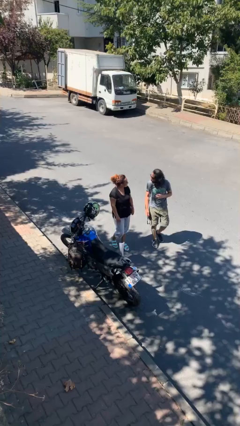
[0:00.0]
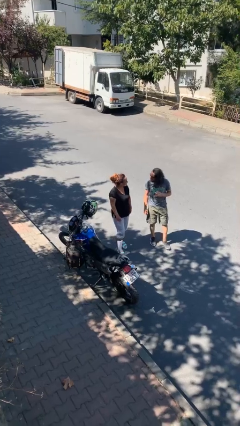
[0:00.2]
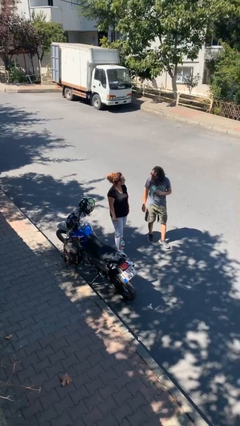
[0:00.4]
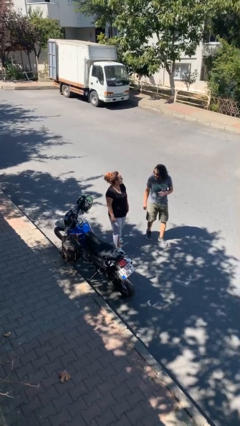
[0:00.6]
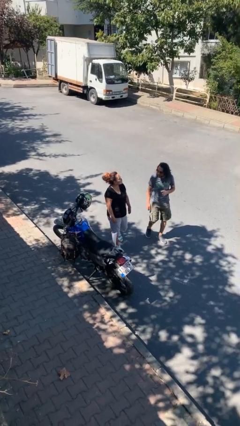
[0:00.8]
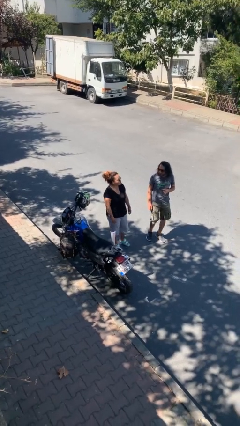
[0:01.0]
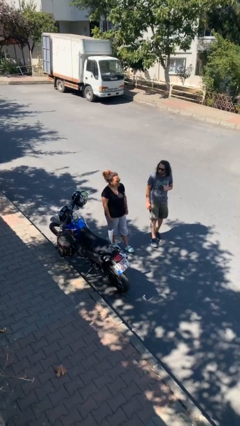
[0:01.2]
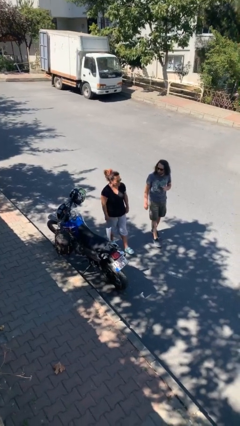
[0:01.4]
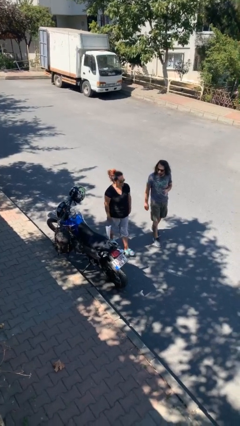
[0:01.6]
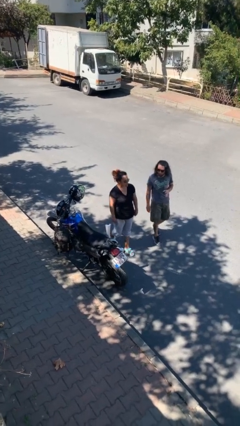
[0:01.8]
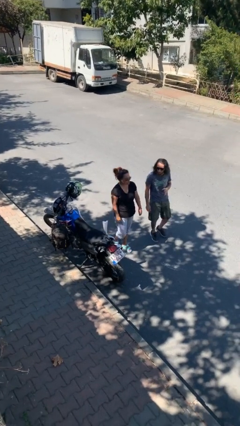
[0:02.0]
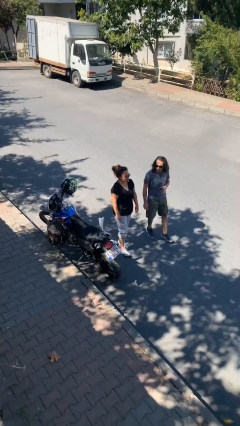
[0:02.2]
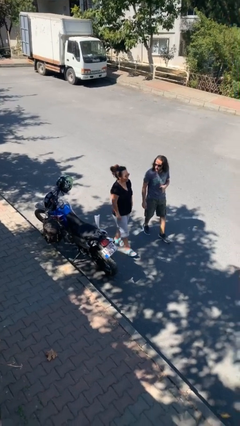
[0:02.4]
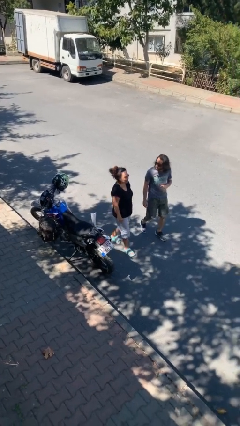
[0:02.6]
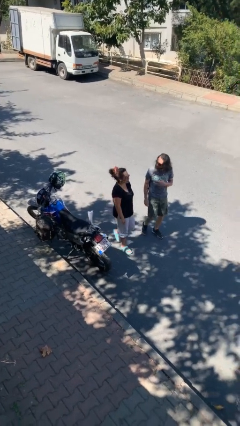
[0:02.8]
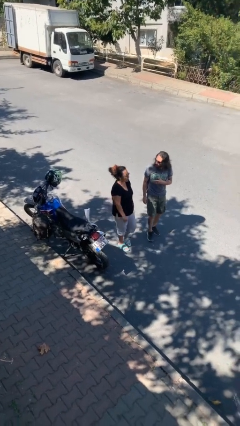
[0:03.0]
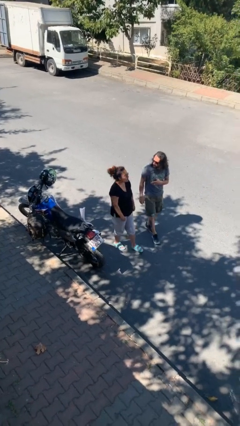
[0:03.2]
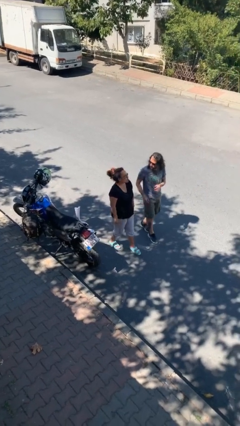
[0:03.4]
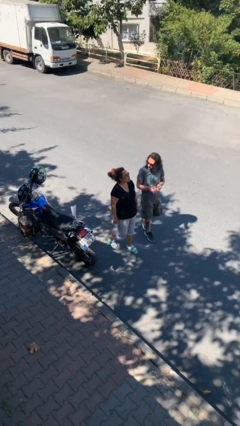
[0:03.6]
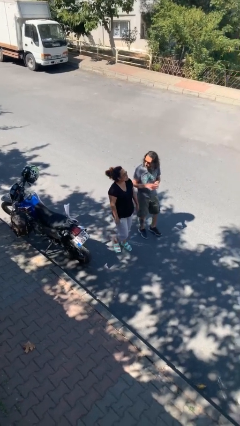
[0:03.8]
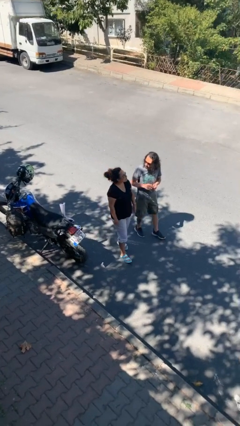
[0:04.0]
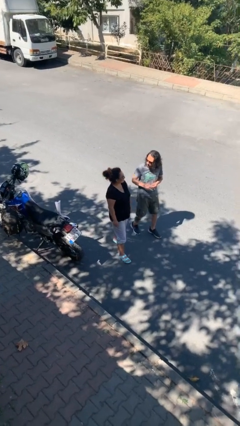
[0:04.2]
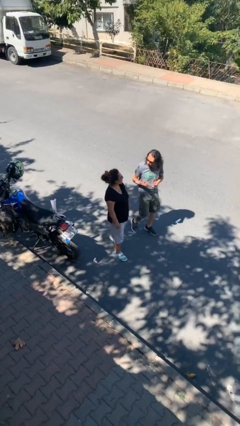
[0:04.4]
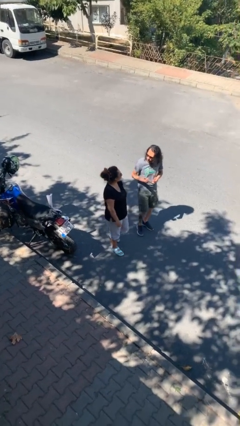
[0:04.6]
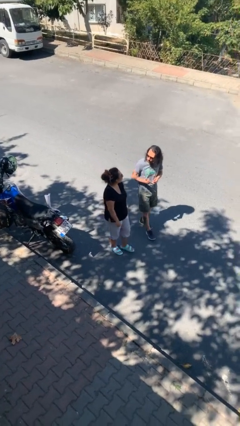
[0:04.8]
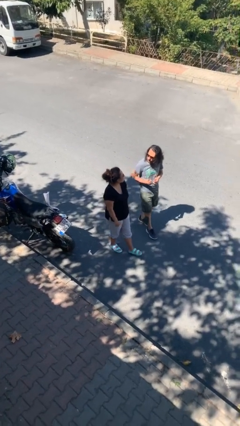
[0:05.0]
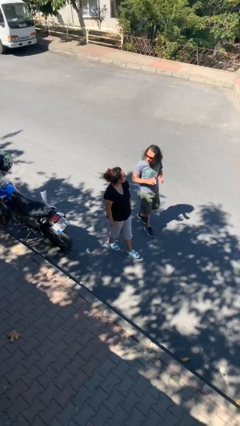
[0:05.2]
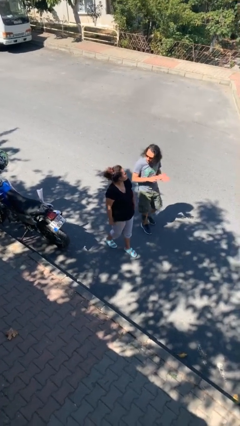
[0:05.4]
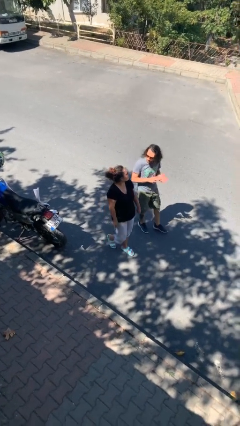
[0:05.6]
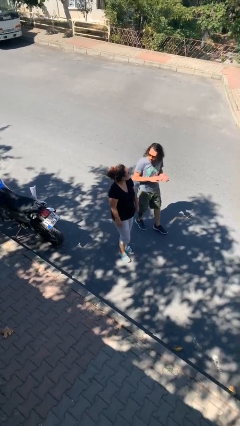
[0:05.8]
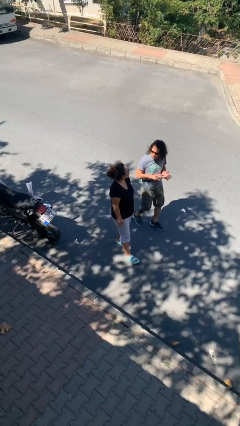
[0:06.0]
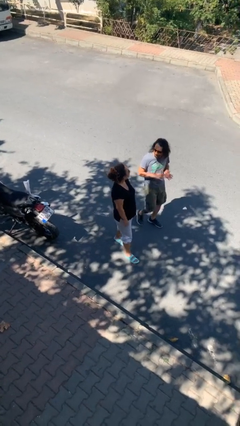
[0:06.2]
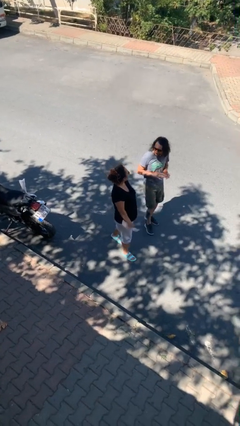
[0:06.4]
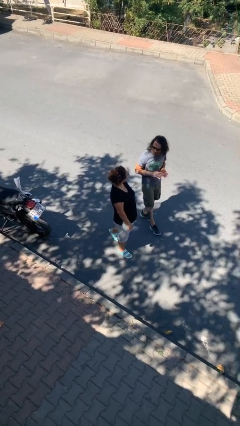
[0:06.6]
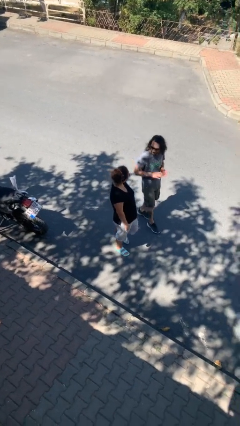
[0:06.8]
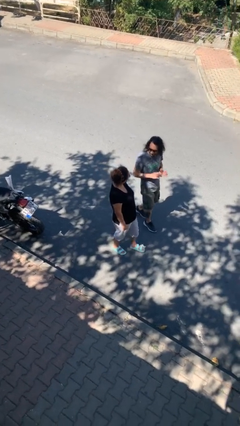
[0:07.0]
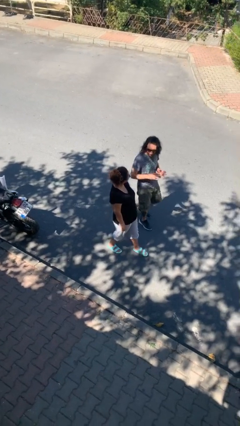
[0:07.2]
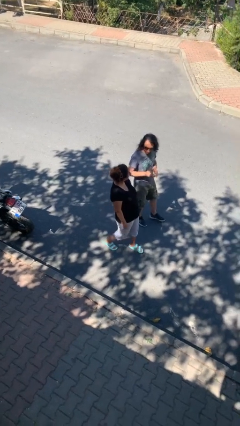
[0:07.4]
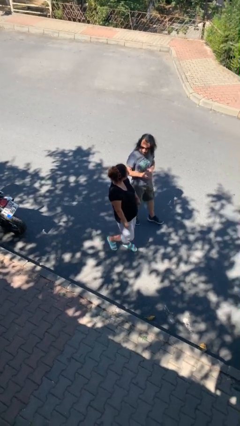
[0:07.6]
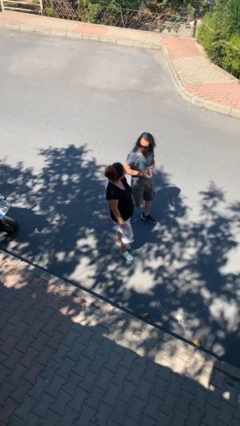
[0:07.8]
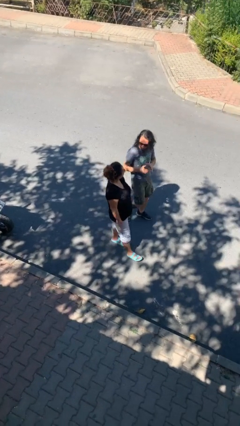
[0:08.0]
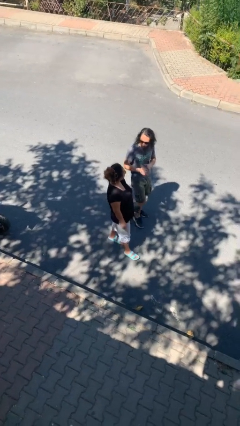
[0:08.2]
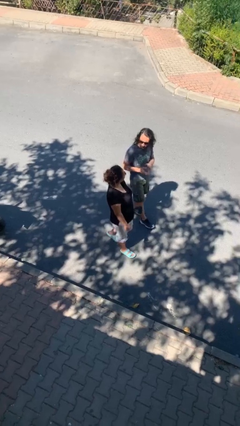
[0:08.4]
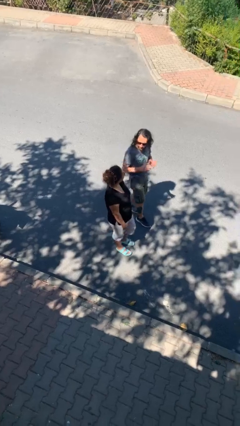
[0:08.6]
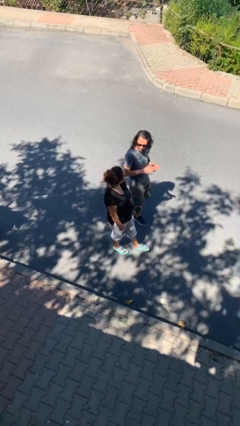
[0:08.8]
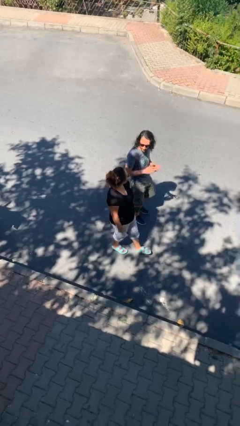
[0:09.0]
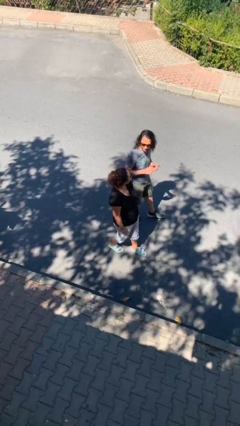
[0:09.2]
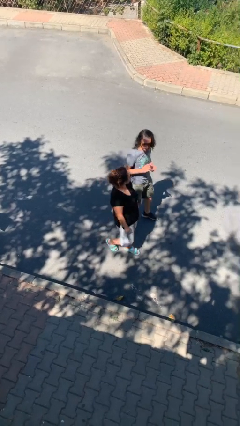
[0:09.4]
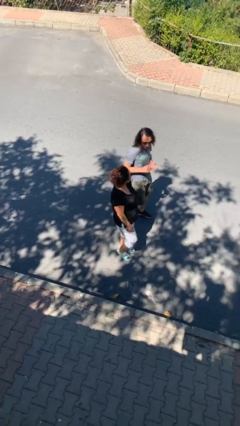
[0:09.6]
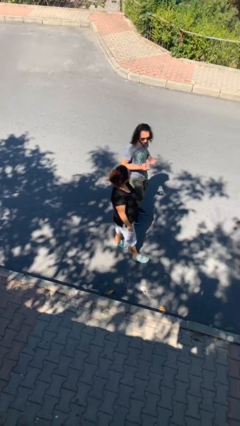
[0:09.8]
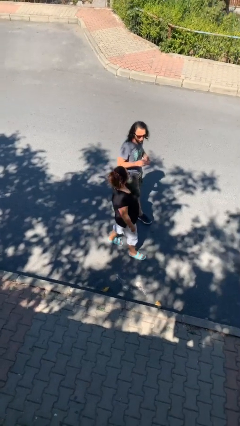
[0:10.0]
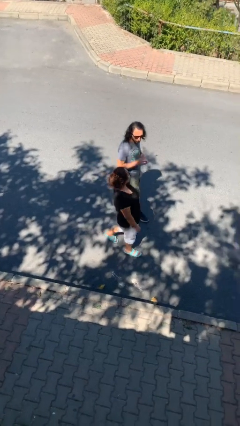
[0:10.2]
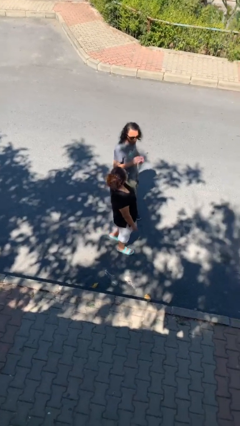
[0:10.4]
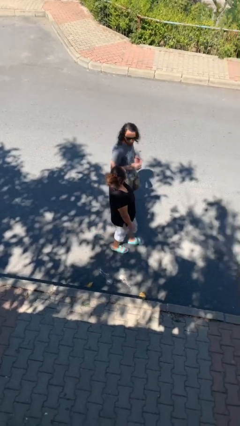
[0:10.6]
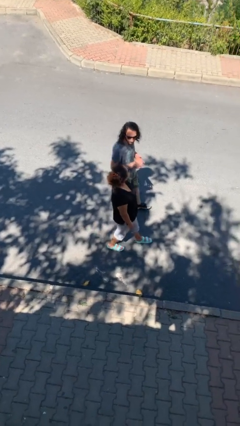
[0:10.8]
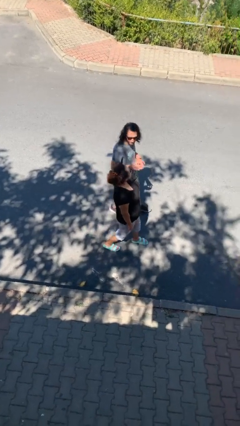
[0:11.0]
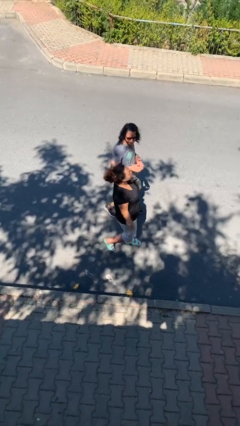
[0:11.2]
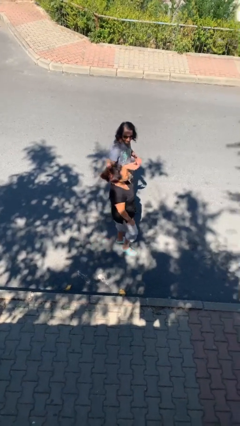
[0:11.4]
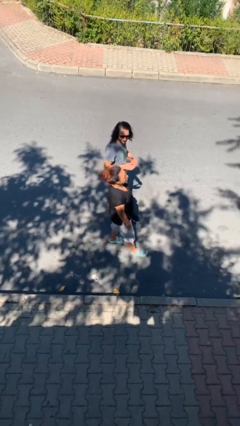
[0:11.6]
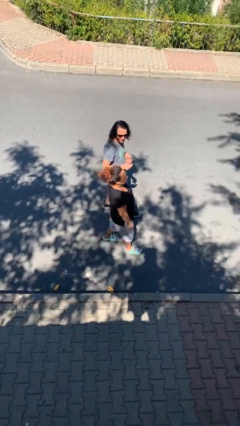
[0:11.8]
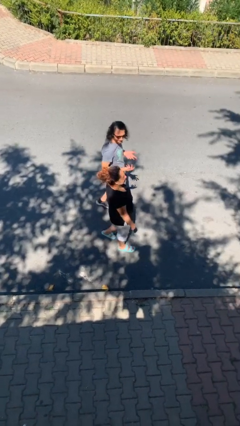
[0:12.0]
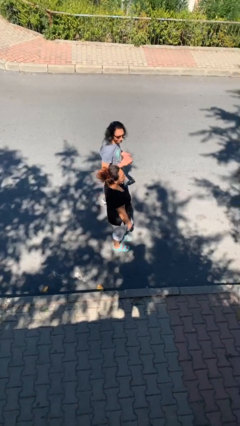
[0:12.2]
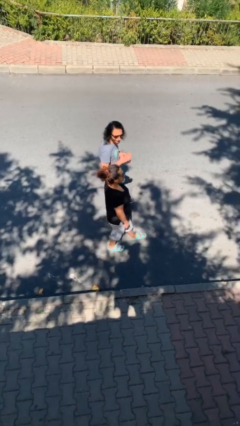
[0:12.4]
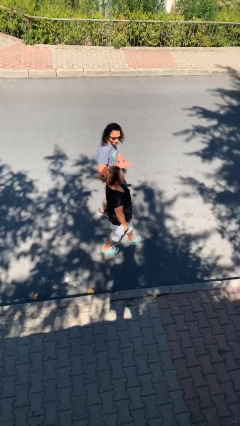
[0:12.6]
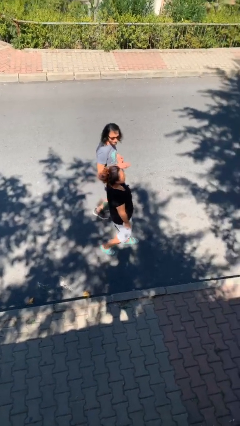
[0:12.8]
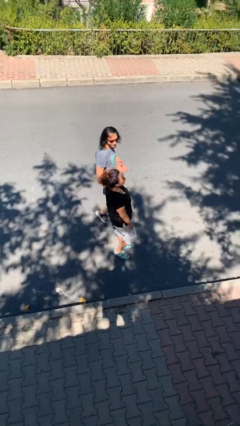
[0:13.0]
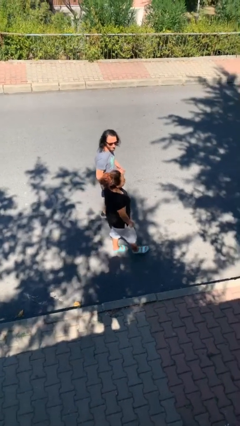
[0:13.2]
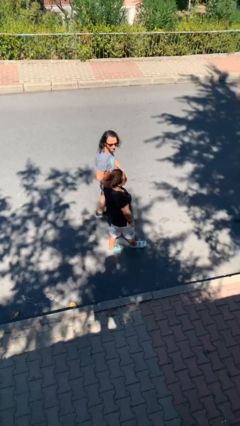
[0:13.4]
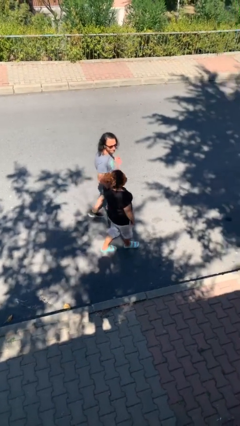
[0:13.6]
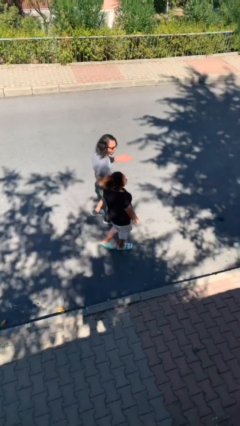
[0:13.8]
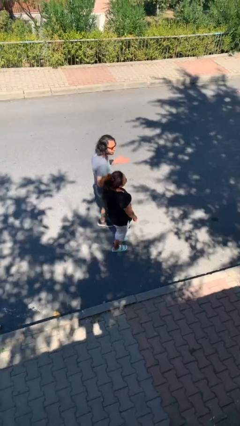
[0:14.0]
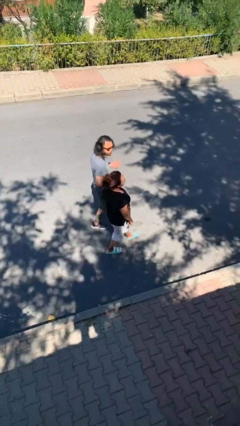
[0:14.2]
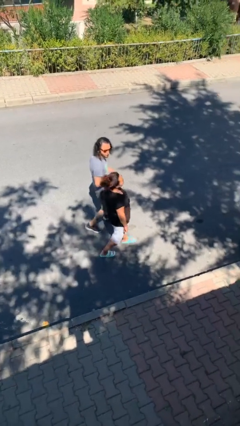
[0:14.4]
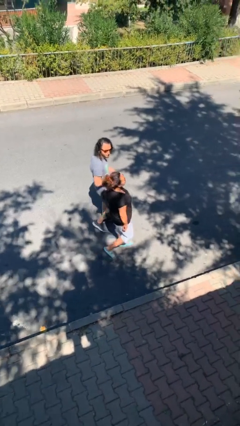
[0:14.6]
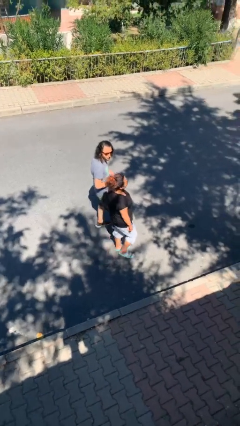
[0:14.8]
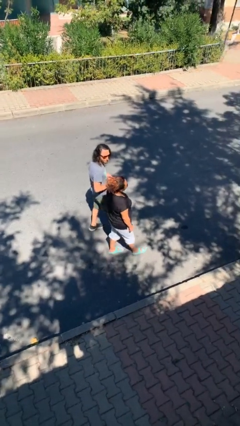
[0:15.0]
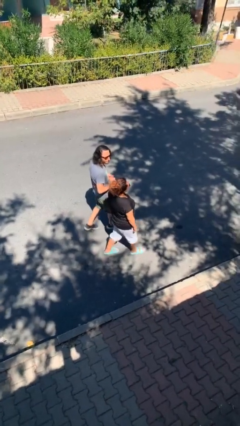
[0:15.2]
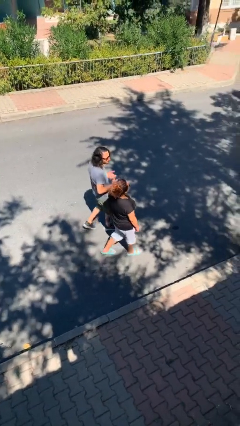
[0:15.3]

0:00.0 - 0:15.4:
person talks to person

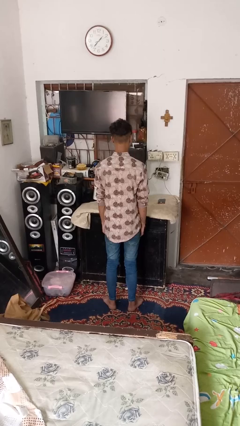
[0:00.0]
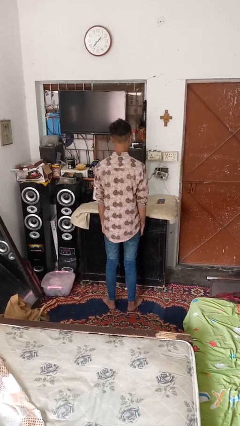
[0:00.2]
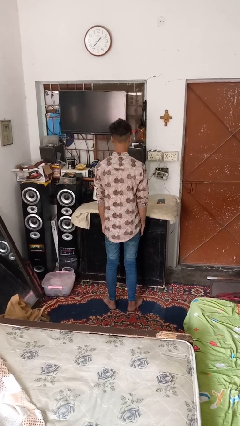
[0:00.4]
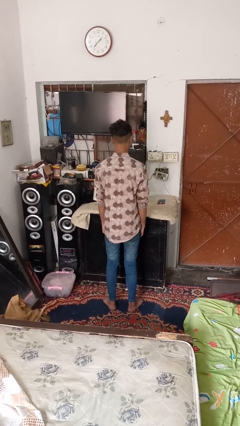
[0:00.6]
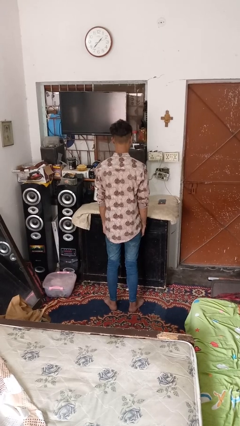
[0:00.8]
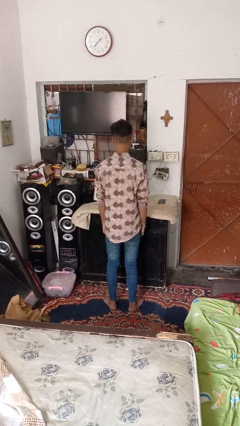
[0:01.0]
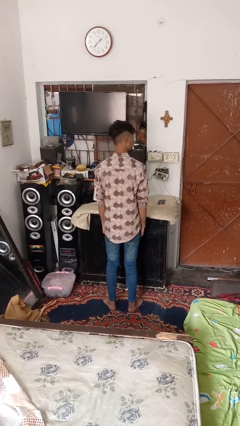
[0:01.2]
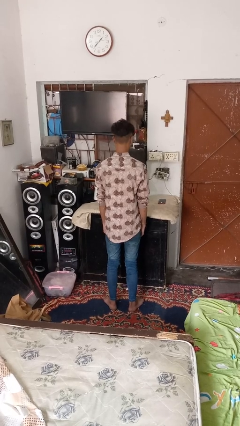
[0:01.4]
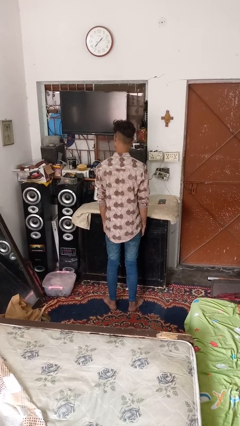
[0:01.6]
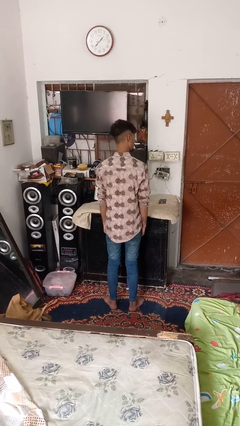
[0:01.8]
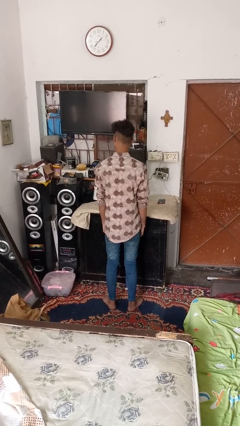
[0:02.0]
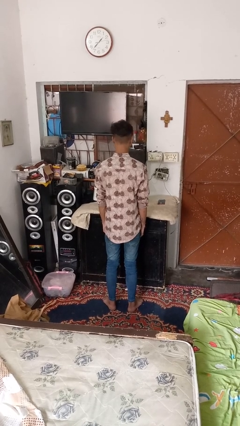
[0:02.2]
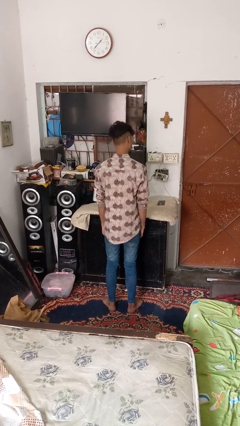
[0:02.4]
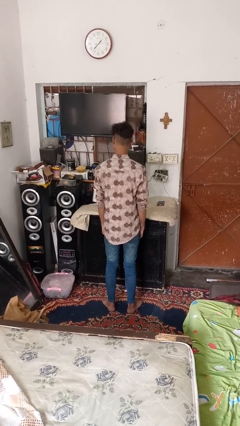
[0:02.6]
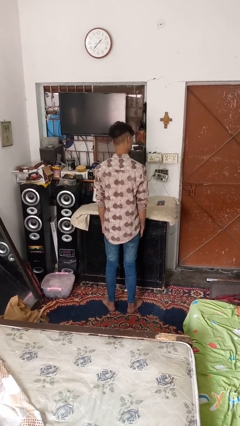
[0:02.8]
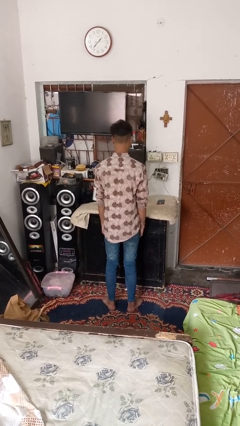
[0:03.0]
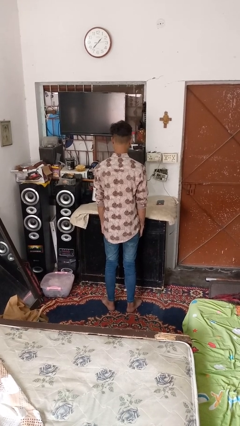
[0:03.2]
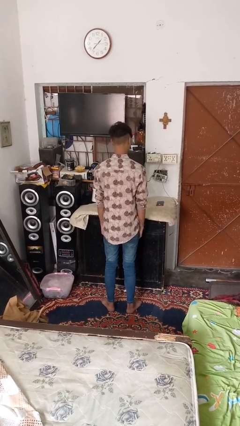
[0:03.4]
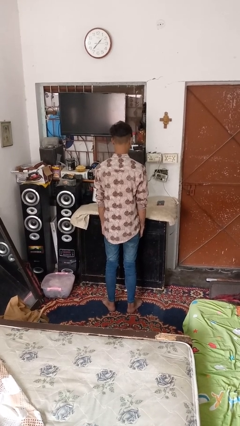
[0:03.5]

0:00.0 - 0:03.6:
person shakes head
